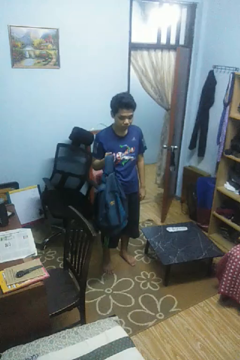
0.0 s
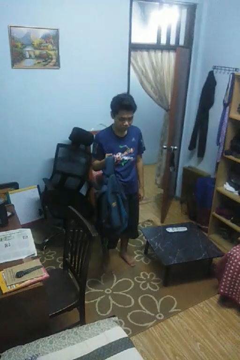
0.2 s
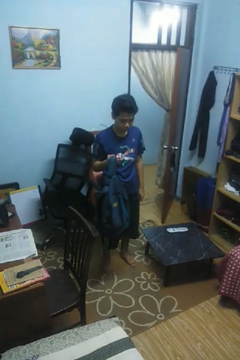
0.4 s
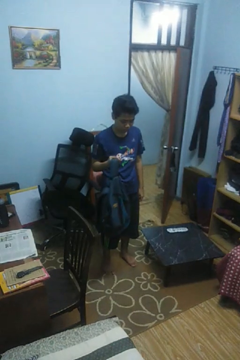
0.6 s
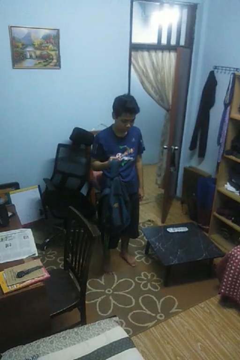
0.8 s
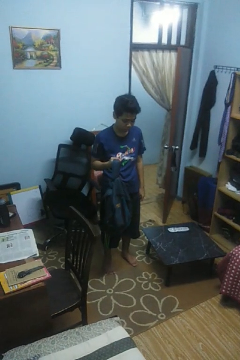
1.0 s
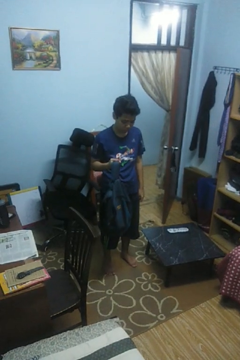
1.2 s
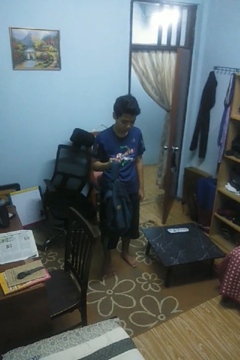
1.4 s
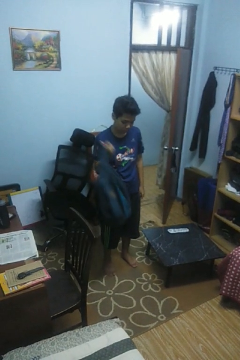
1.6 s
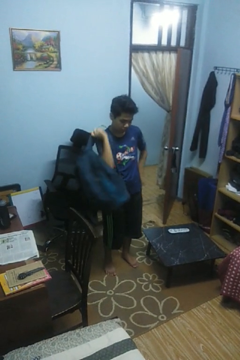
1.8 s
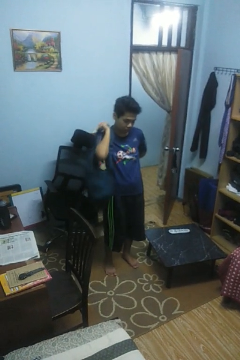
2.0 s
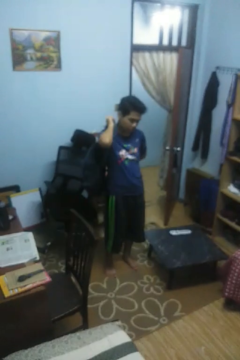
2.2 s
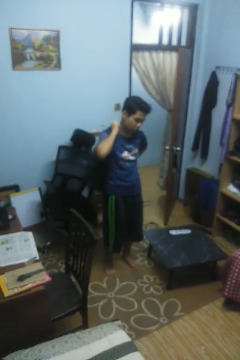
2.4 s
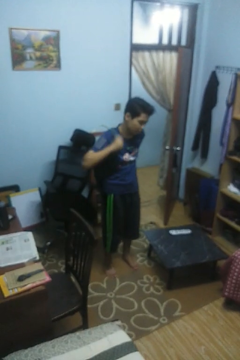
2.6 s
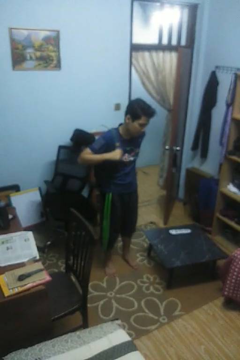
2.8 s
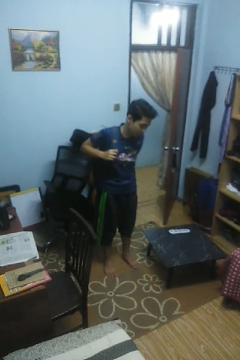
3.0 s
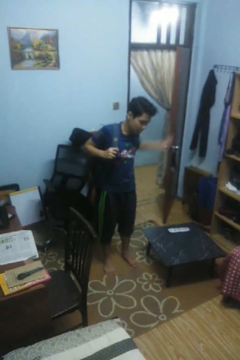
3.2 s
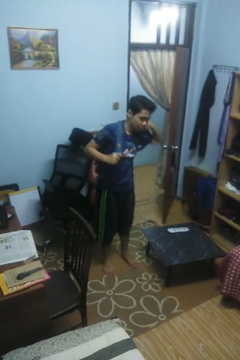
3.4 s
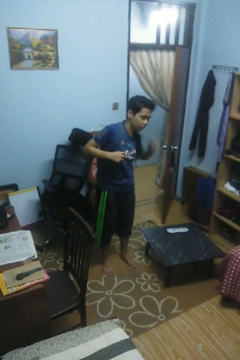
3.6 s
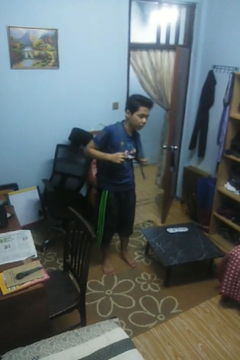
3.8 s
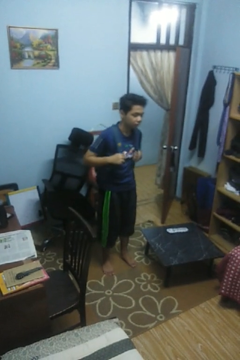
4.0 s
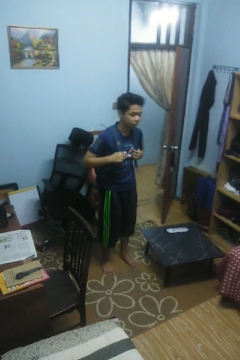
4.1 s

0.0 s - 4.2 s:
person puts on backpack

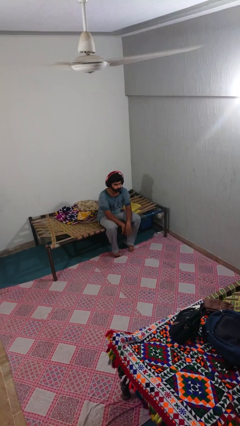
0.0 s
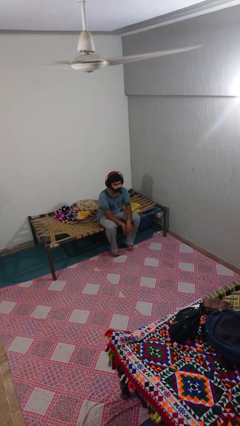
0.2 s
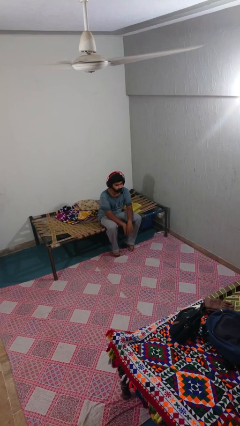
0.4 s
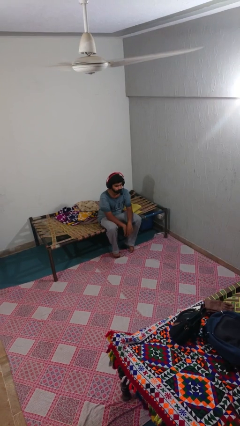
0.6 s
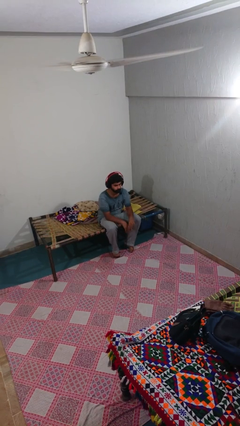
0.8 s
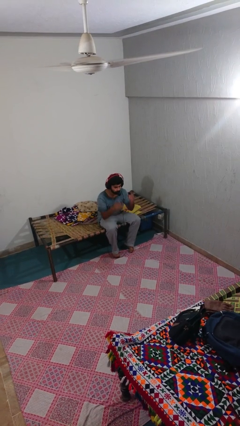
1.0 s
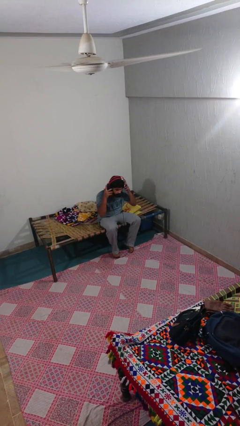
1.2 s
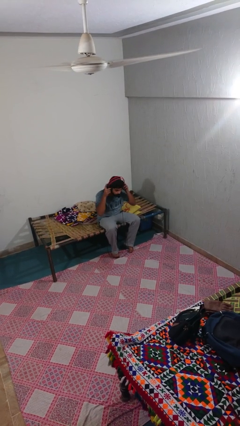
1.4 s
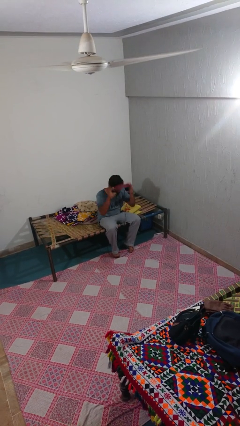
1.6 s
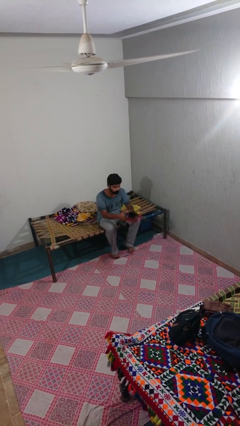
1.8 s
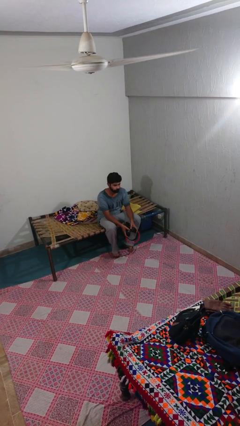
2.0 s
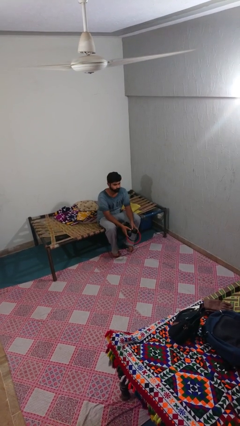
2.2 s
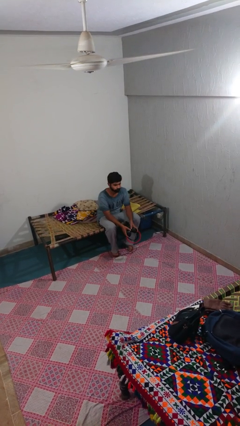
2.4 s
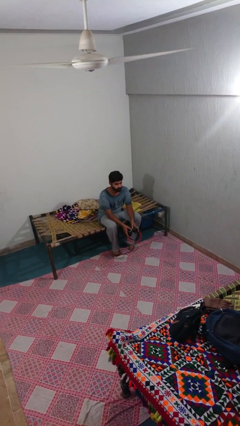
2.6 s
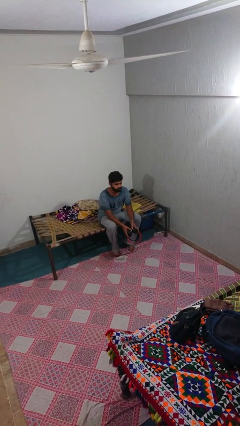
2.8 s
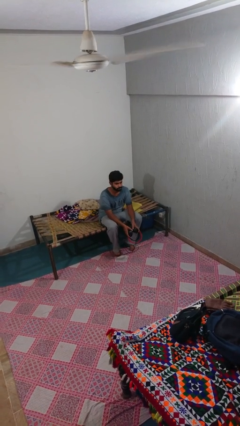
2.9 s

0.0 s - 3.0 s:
person takes off headphones

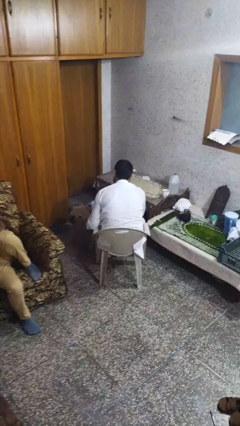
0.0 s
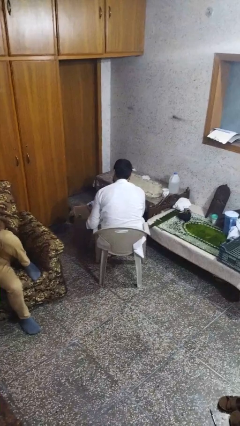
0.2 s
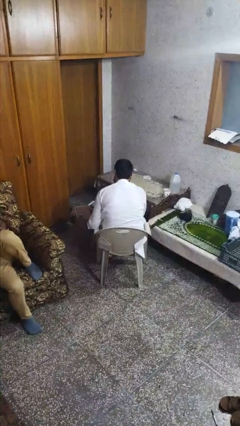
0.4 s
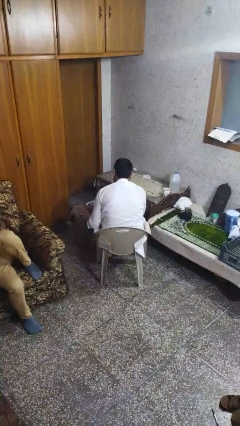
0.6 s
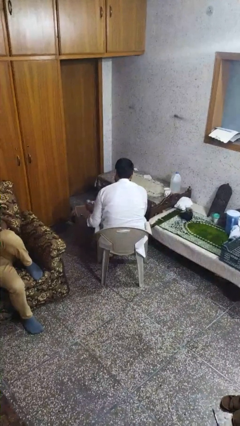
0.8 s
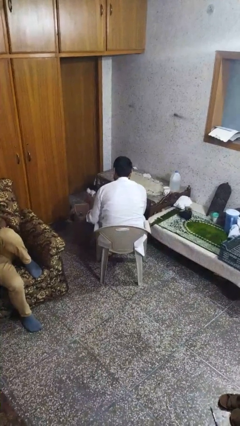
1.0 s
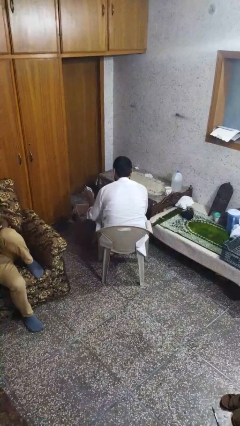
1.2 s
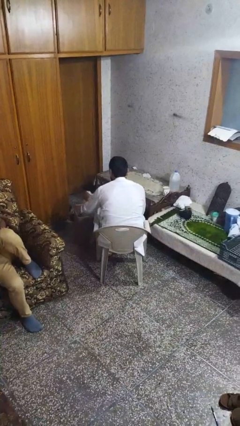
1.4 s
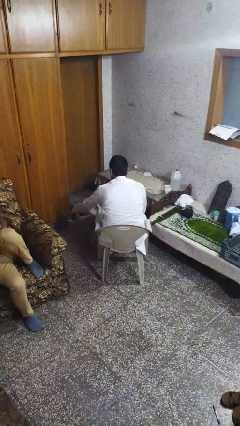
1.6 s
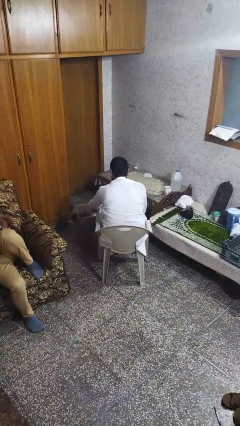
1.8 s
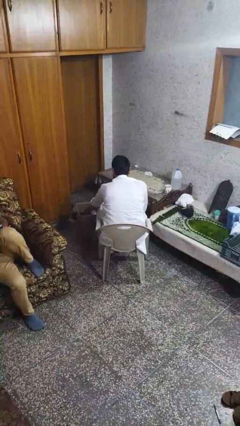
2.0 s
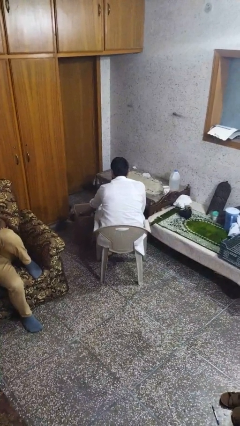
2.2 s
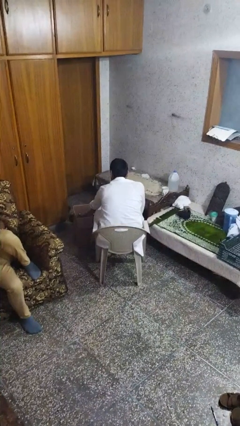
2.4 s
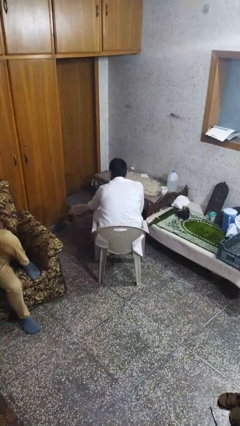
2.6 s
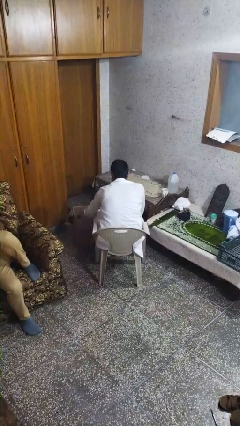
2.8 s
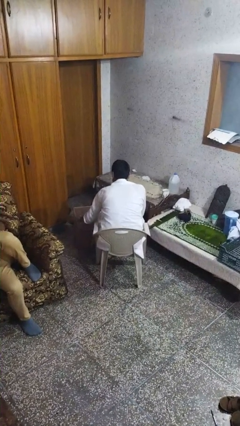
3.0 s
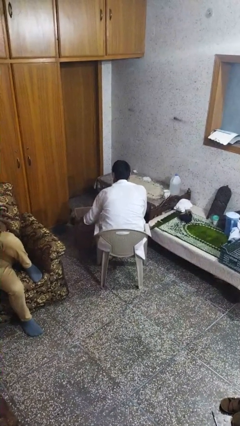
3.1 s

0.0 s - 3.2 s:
person puts object into box

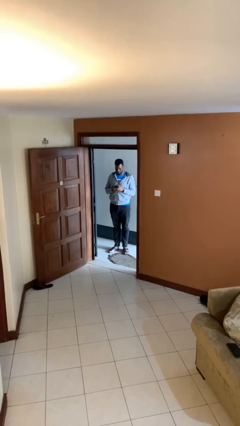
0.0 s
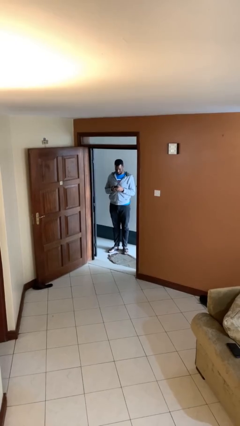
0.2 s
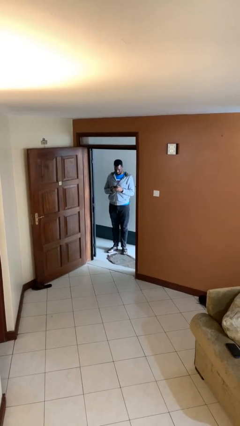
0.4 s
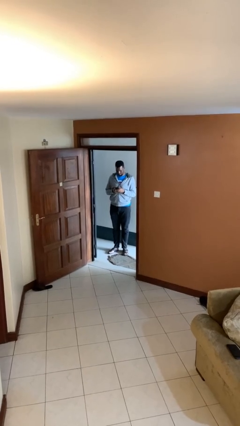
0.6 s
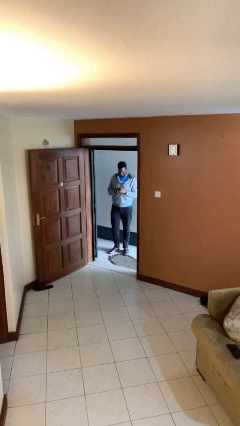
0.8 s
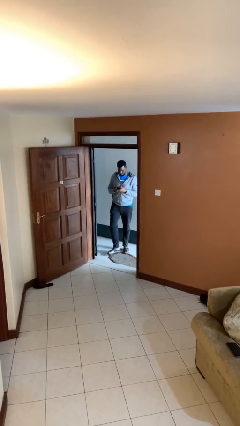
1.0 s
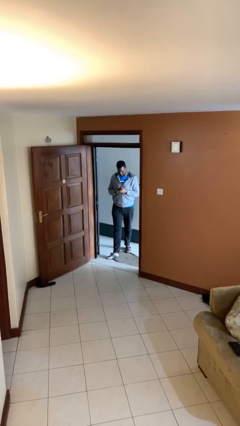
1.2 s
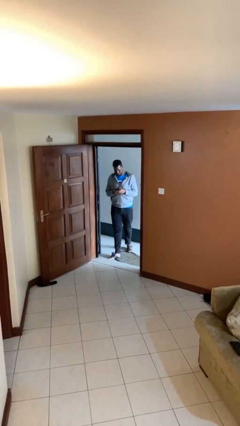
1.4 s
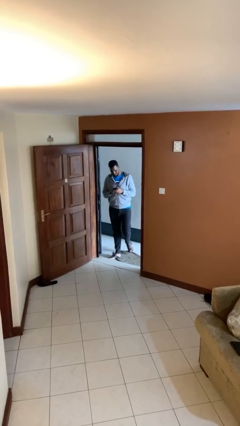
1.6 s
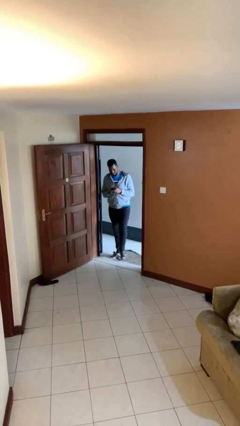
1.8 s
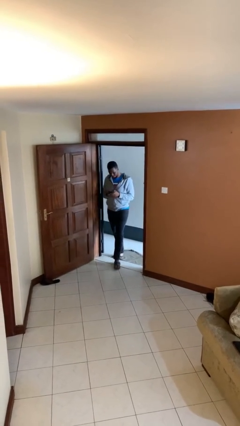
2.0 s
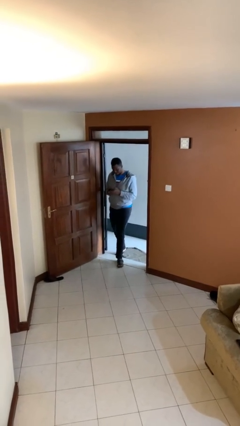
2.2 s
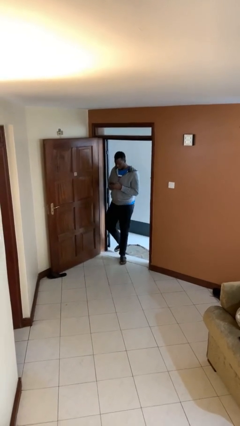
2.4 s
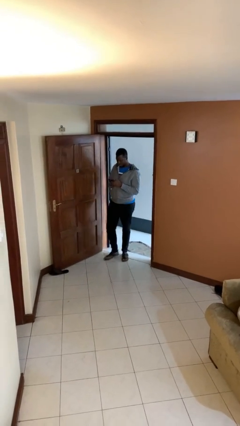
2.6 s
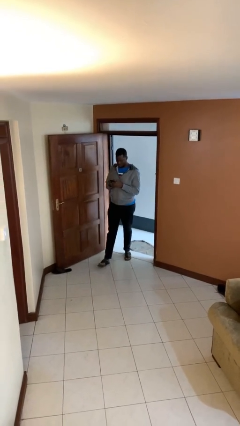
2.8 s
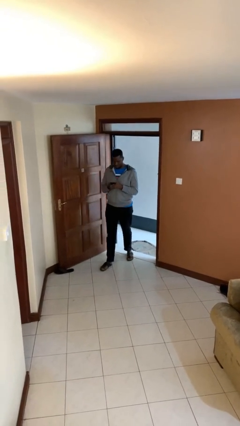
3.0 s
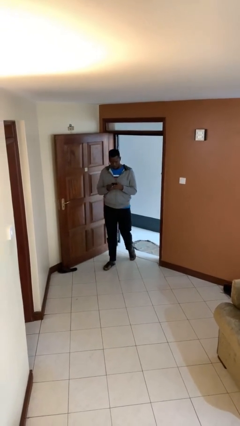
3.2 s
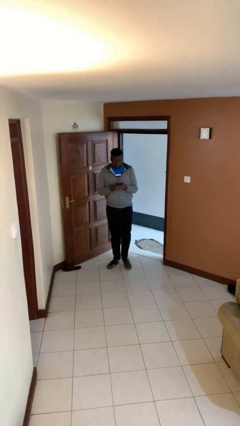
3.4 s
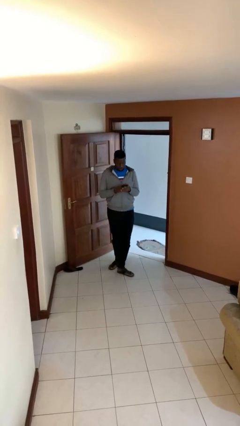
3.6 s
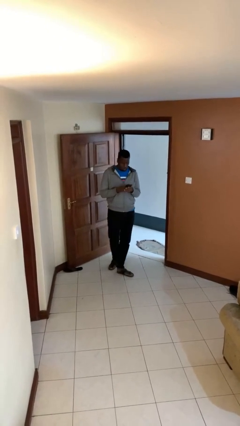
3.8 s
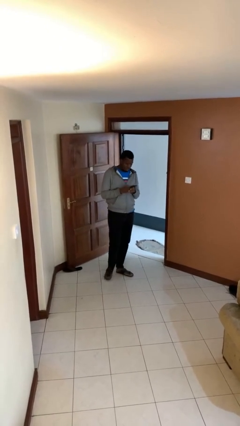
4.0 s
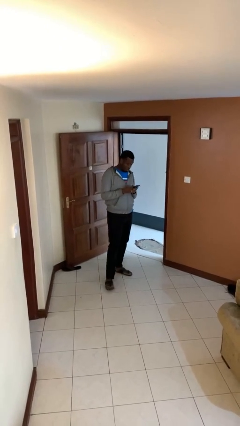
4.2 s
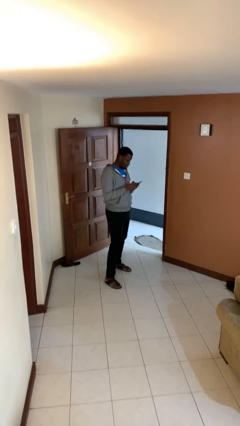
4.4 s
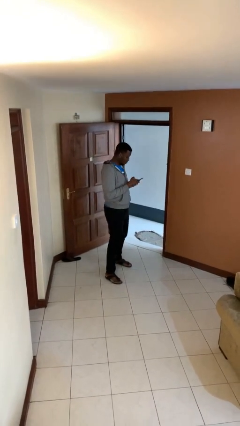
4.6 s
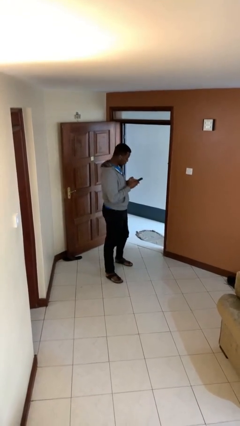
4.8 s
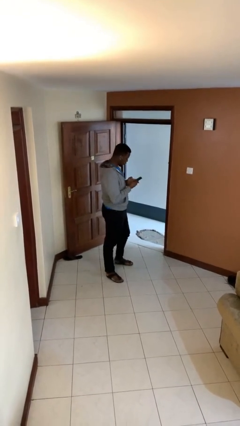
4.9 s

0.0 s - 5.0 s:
person enters scene through structure

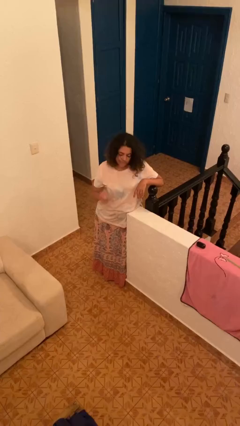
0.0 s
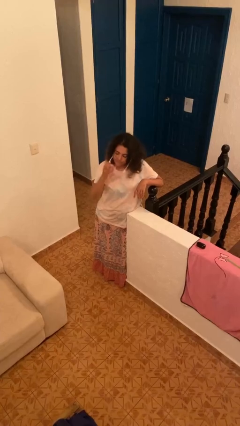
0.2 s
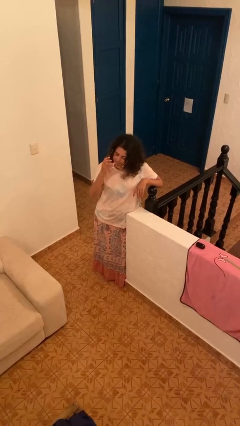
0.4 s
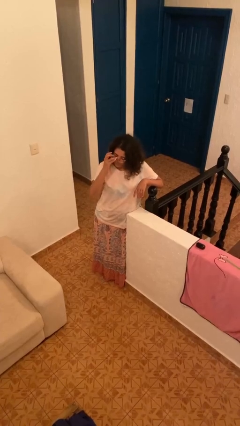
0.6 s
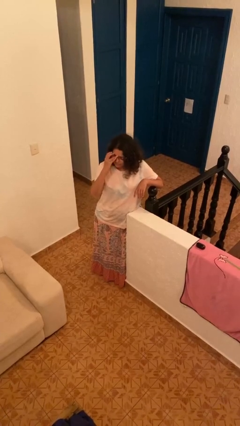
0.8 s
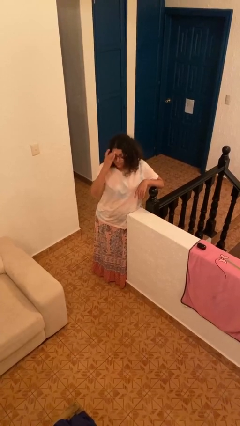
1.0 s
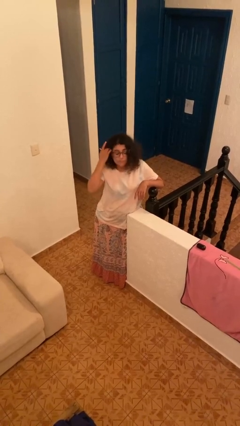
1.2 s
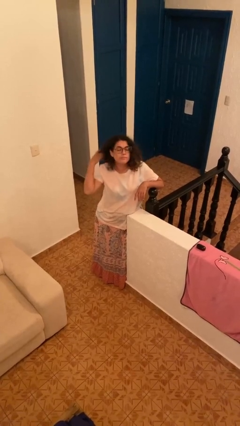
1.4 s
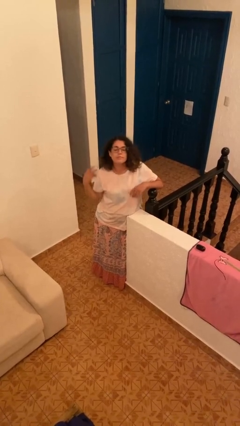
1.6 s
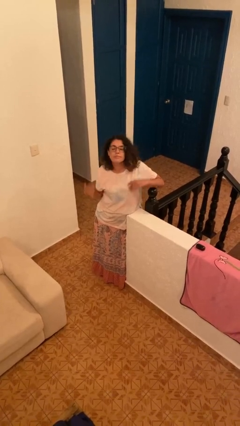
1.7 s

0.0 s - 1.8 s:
person puts on glasses

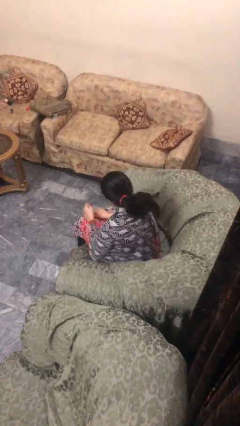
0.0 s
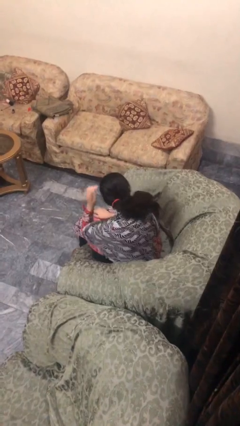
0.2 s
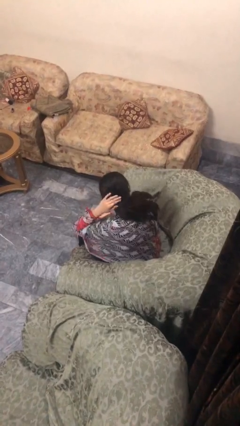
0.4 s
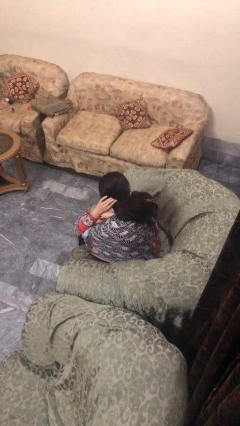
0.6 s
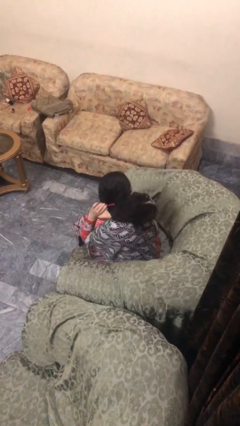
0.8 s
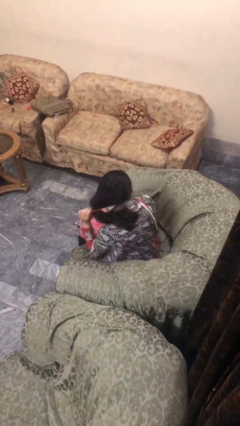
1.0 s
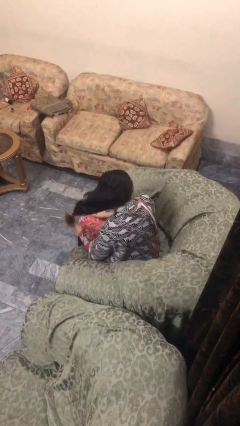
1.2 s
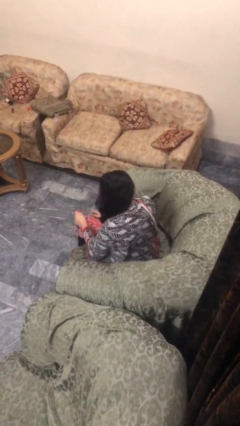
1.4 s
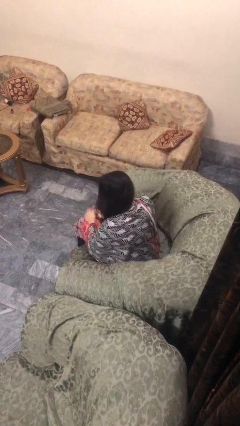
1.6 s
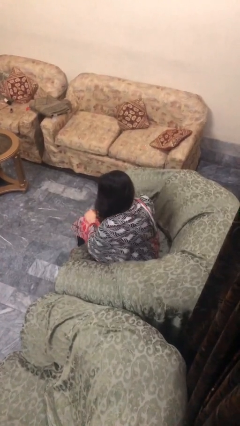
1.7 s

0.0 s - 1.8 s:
person takes off hairtie
